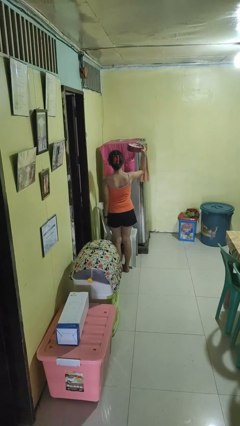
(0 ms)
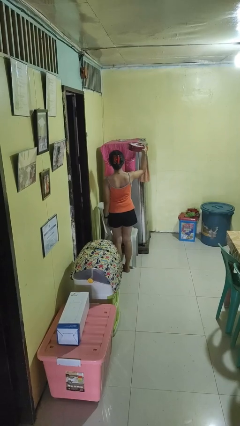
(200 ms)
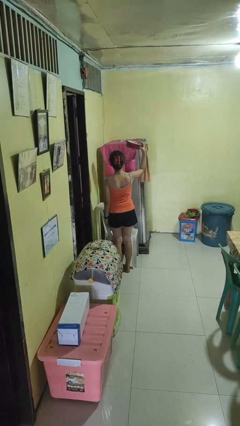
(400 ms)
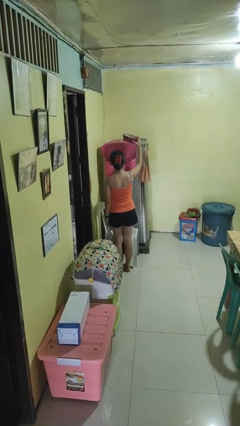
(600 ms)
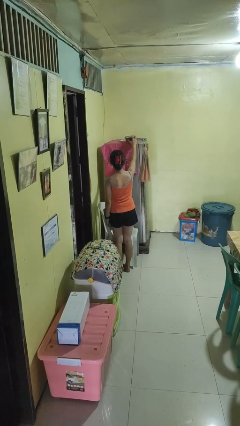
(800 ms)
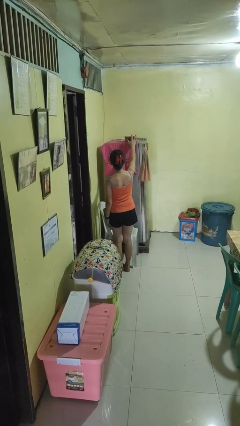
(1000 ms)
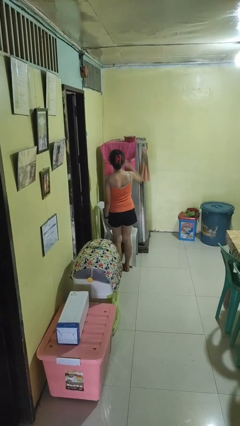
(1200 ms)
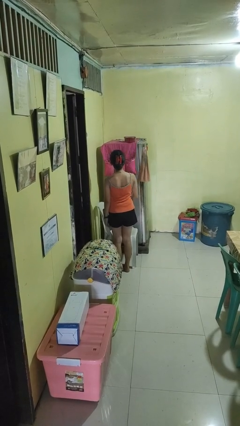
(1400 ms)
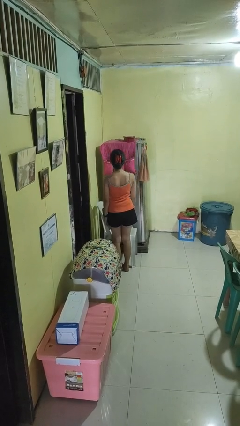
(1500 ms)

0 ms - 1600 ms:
person puts down object on shelf

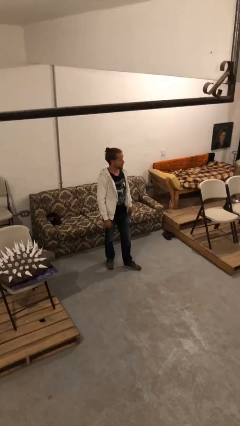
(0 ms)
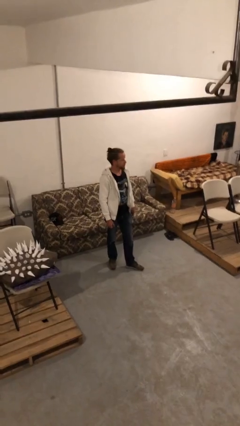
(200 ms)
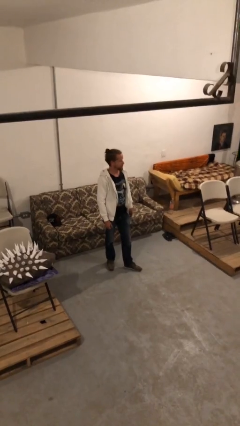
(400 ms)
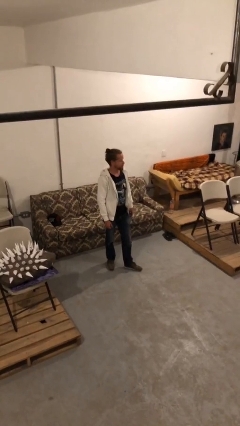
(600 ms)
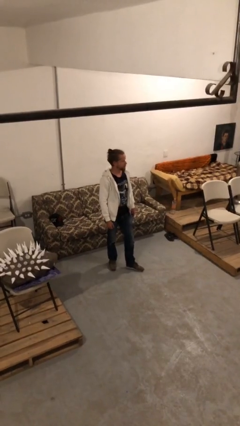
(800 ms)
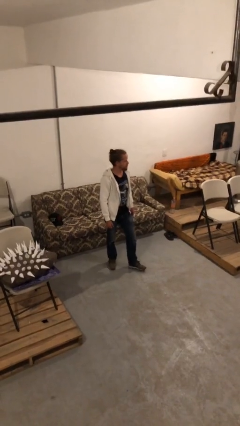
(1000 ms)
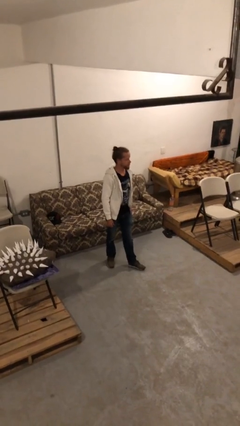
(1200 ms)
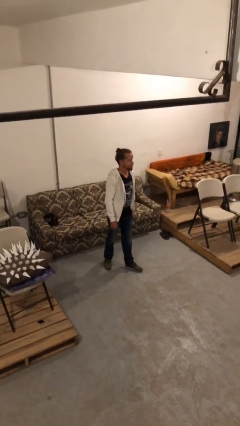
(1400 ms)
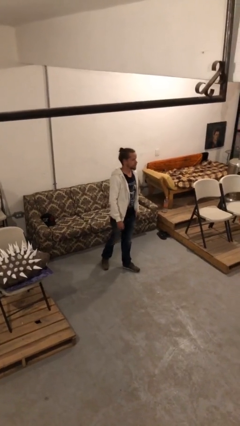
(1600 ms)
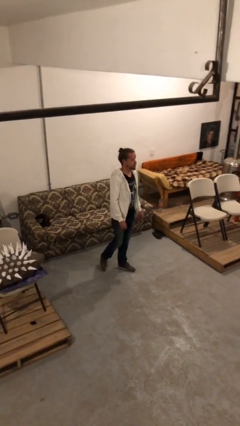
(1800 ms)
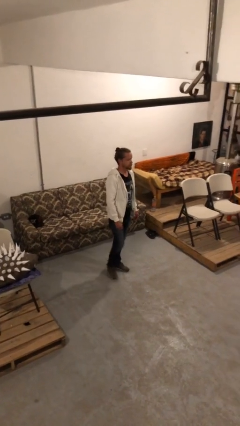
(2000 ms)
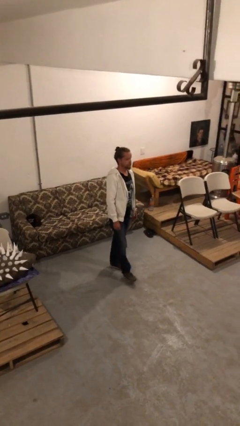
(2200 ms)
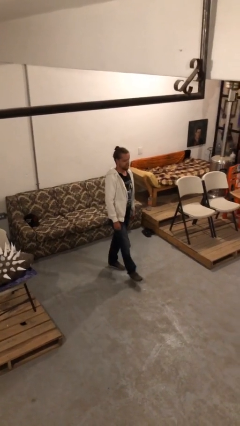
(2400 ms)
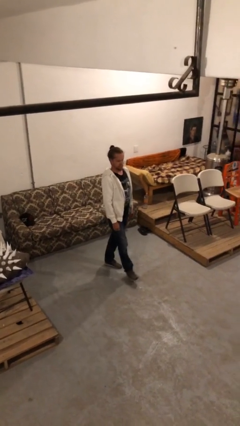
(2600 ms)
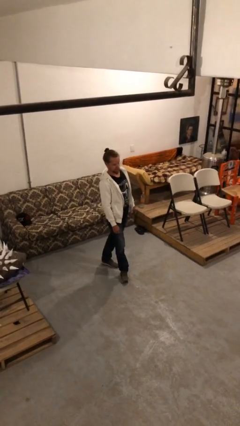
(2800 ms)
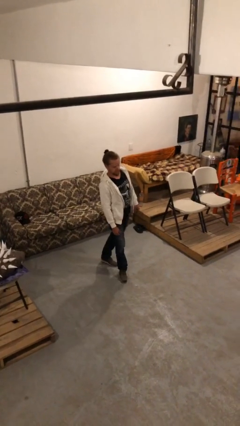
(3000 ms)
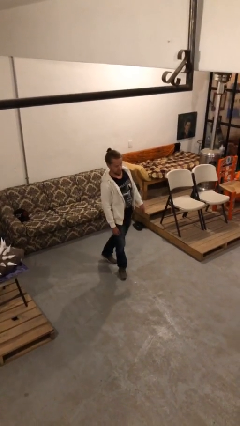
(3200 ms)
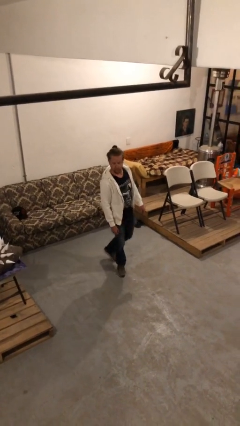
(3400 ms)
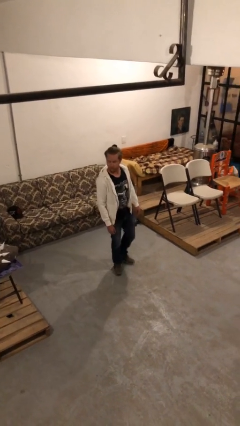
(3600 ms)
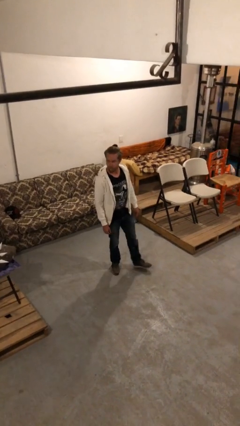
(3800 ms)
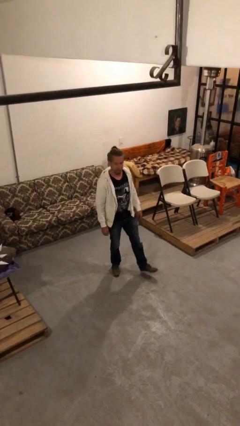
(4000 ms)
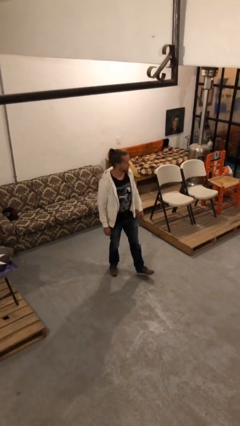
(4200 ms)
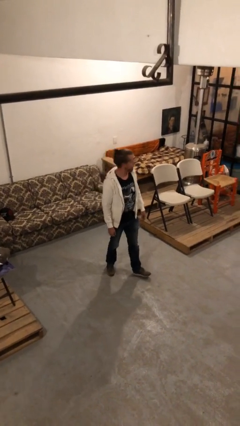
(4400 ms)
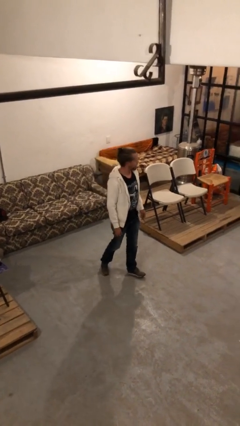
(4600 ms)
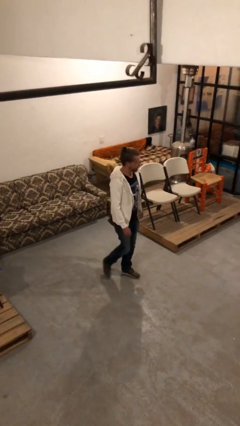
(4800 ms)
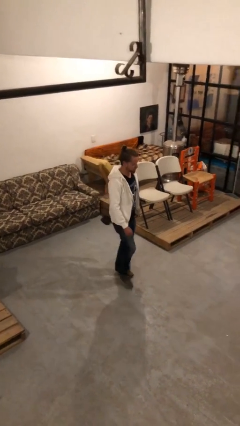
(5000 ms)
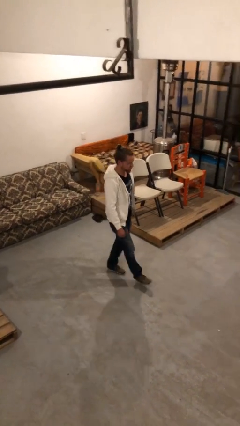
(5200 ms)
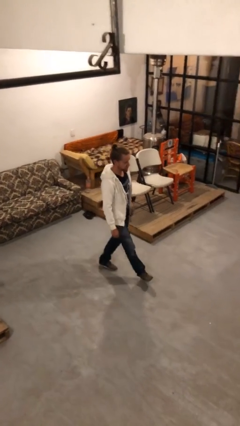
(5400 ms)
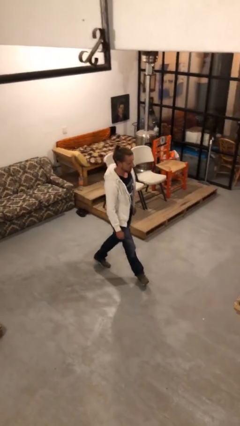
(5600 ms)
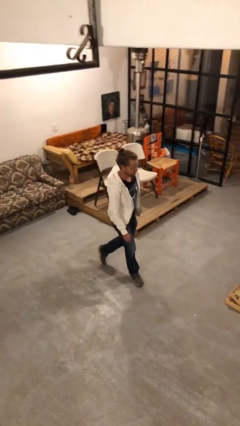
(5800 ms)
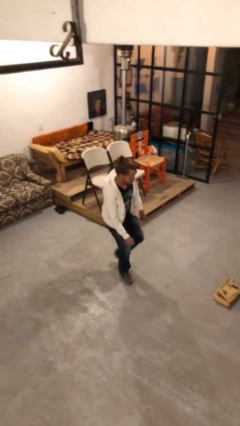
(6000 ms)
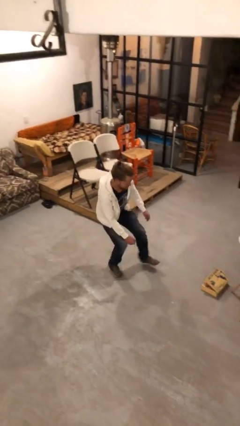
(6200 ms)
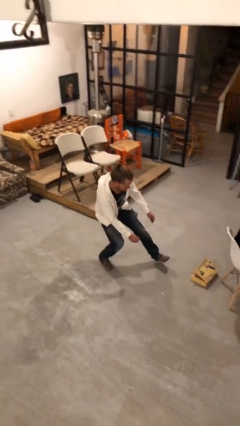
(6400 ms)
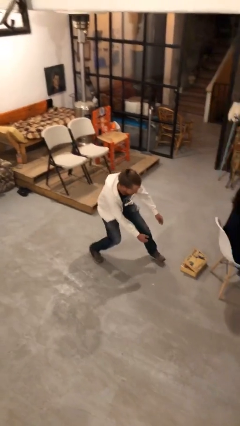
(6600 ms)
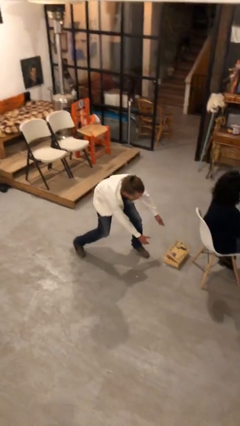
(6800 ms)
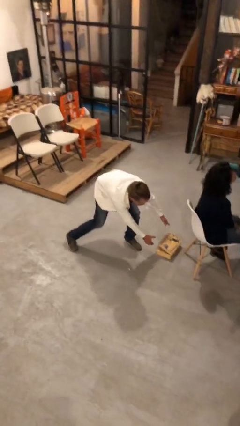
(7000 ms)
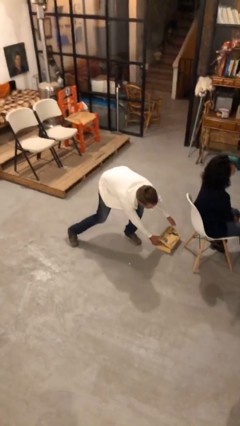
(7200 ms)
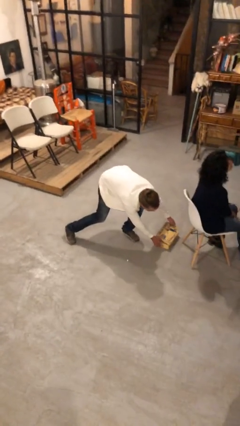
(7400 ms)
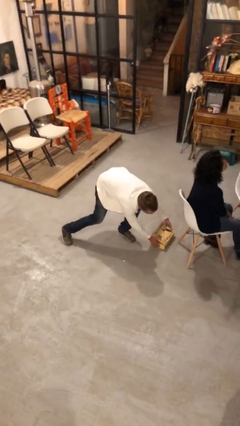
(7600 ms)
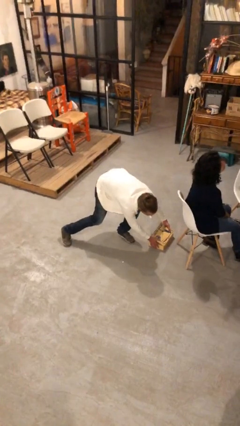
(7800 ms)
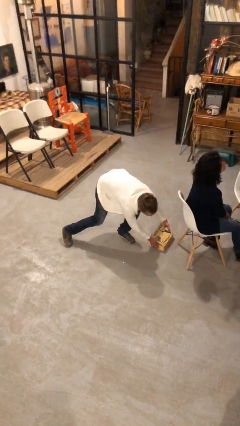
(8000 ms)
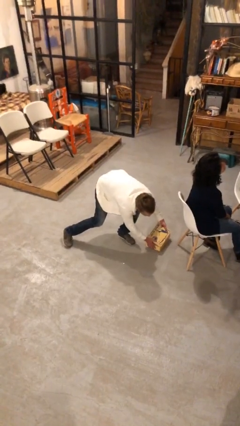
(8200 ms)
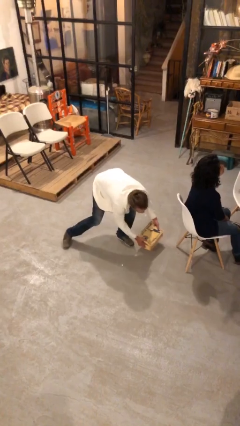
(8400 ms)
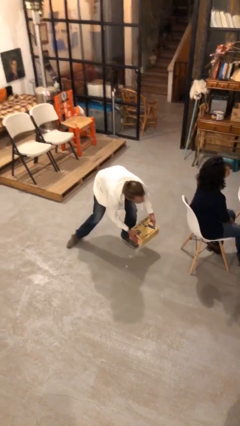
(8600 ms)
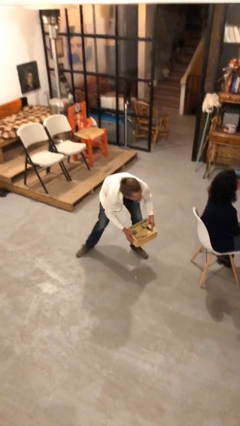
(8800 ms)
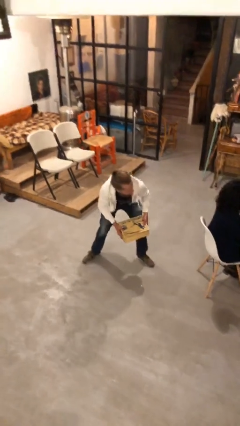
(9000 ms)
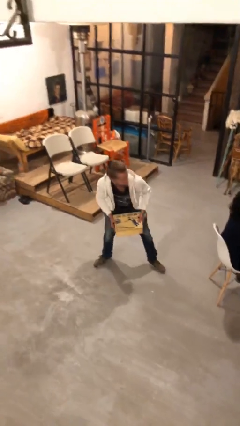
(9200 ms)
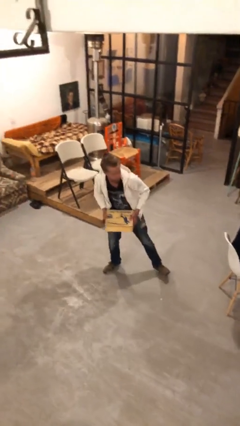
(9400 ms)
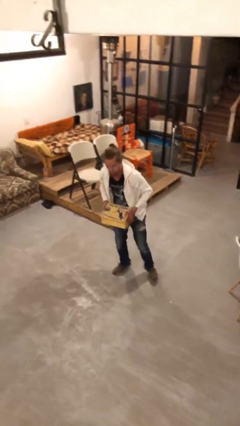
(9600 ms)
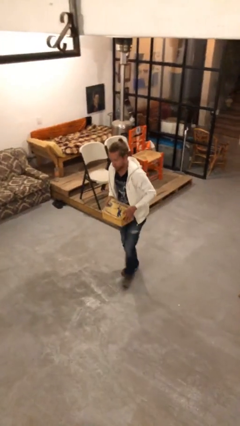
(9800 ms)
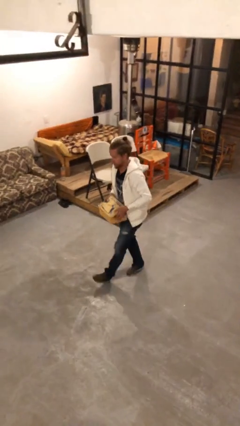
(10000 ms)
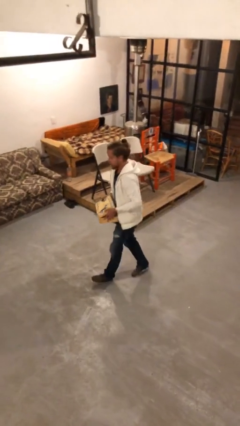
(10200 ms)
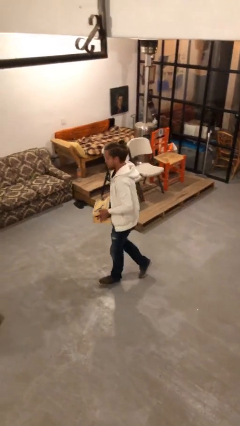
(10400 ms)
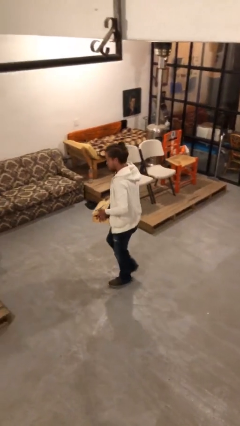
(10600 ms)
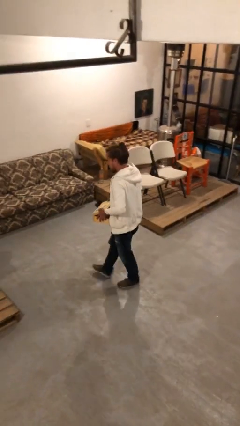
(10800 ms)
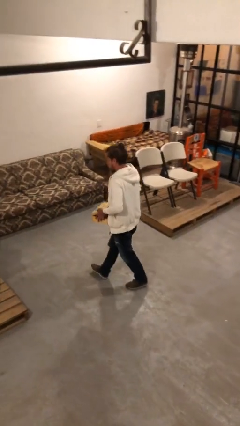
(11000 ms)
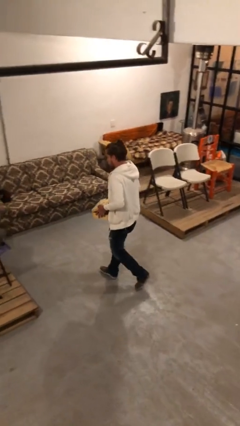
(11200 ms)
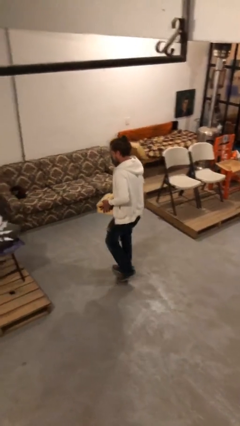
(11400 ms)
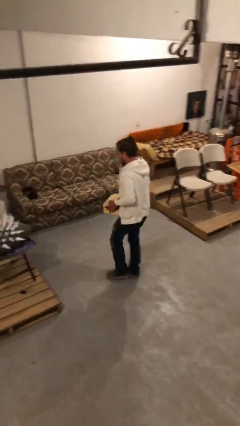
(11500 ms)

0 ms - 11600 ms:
person steals object from person

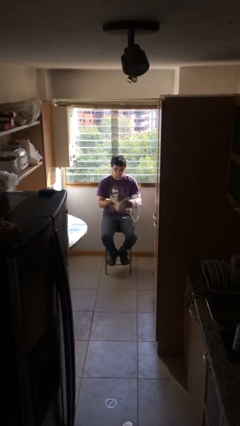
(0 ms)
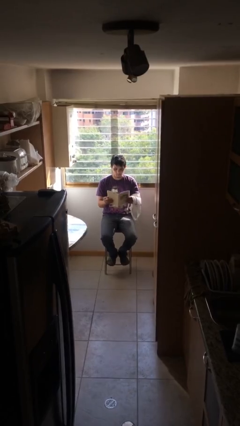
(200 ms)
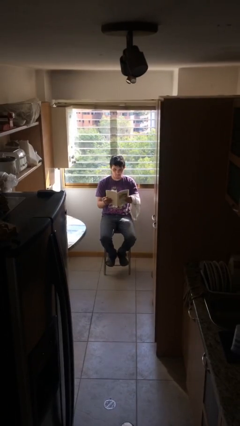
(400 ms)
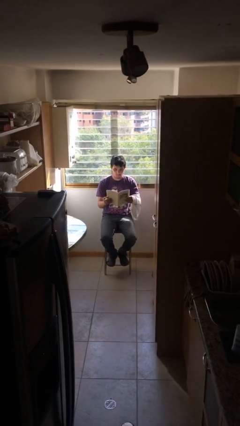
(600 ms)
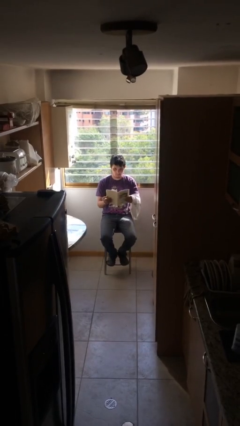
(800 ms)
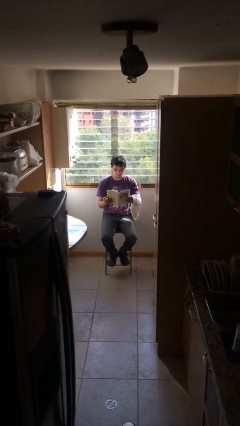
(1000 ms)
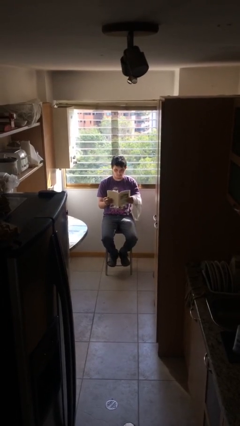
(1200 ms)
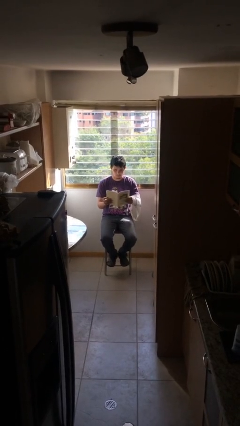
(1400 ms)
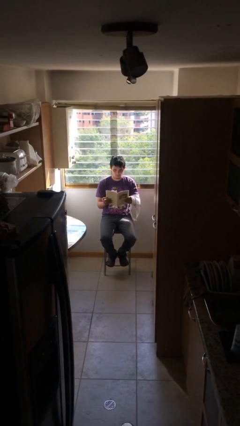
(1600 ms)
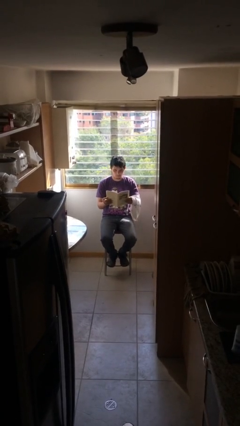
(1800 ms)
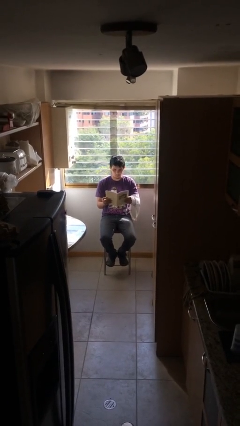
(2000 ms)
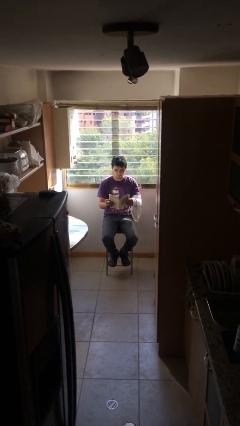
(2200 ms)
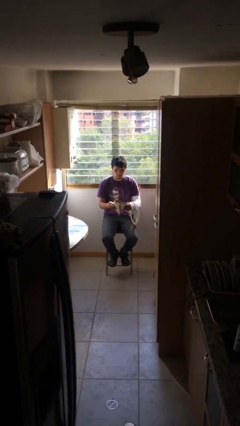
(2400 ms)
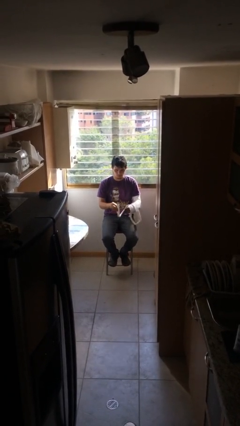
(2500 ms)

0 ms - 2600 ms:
person reads document

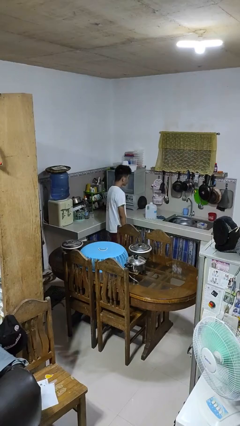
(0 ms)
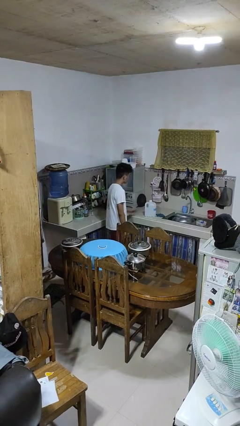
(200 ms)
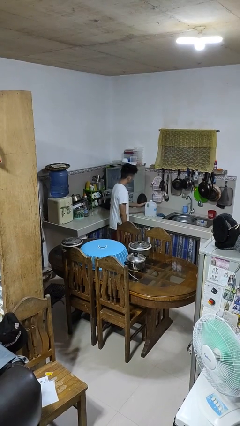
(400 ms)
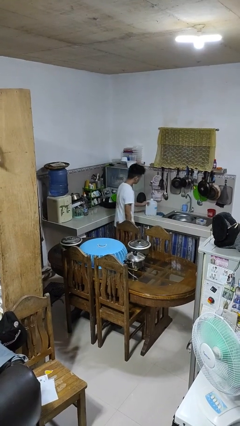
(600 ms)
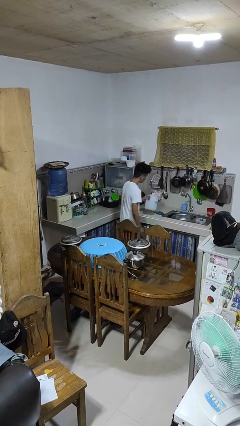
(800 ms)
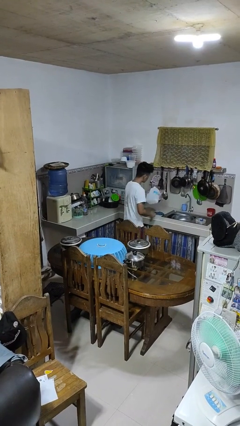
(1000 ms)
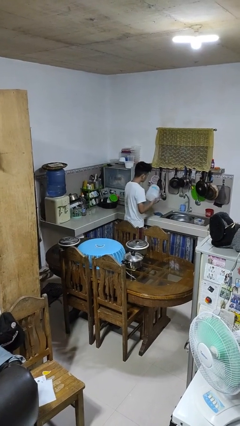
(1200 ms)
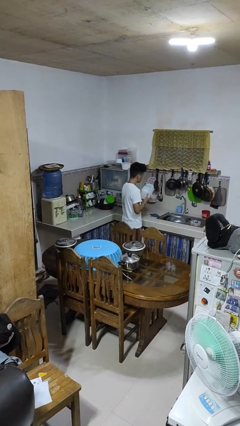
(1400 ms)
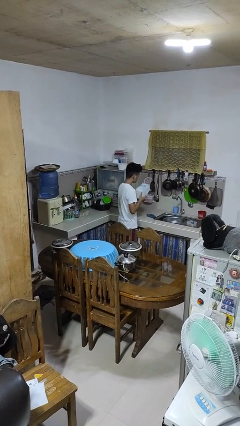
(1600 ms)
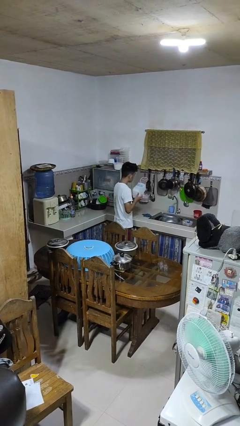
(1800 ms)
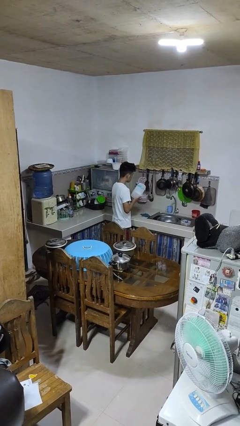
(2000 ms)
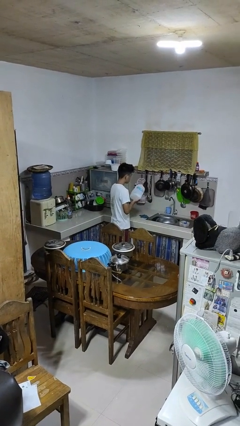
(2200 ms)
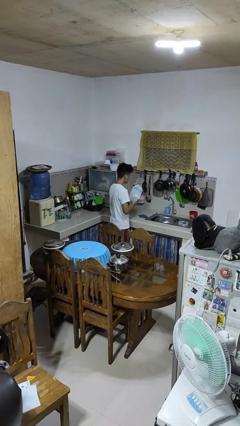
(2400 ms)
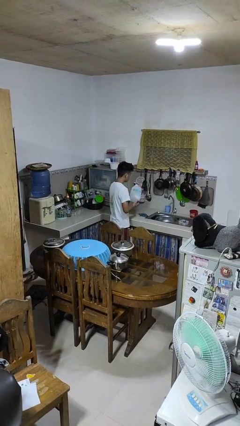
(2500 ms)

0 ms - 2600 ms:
person picks up object from countertop
